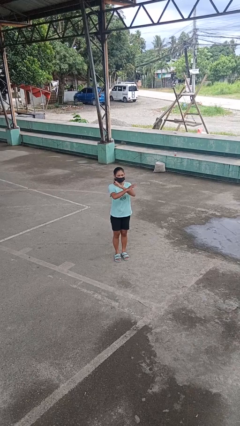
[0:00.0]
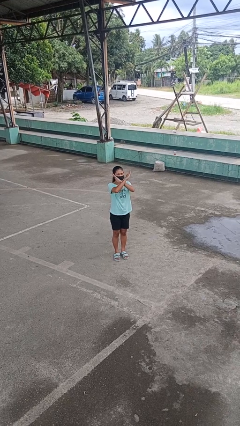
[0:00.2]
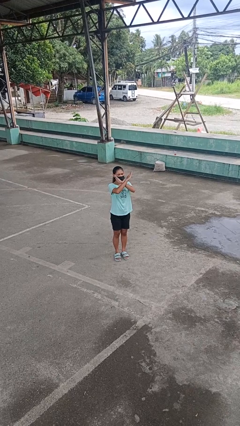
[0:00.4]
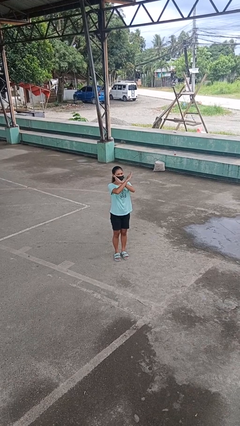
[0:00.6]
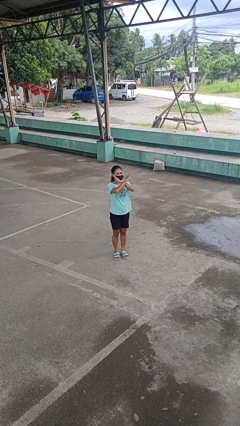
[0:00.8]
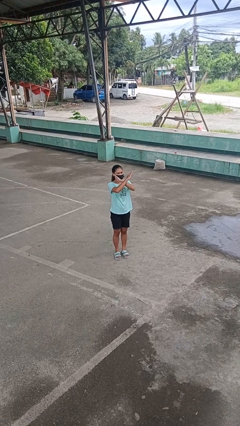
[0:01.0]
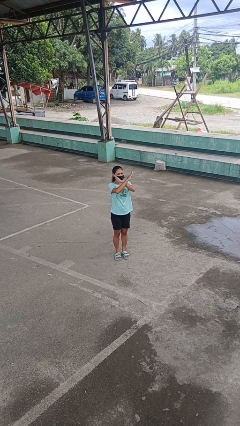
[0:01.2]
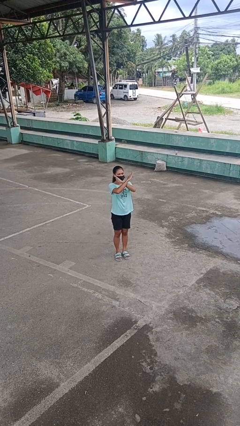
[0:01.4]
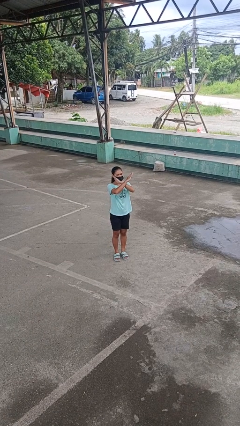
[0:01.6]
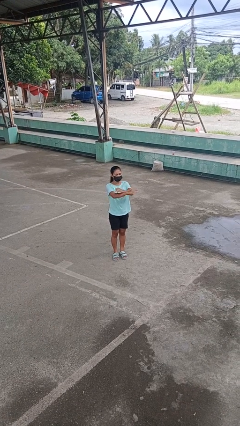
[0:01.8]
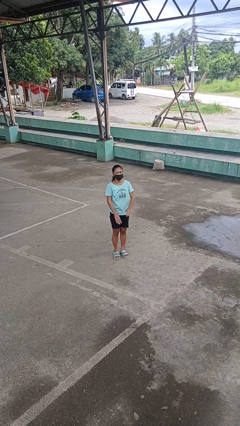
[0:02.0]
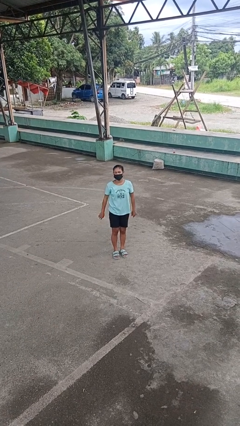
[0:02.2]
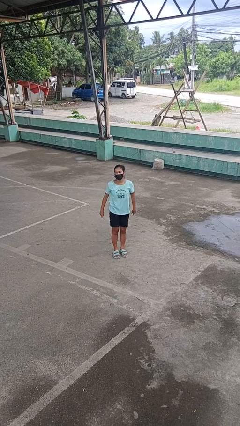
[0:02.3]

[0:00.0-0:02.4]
person gestures arms x

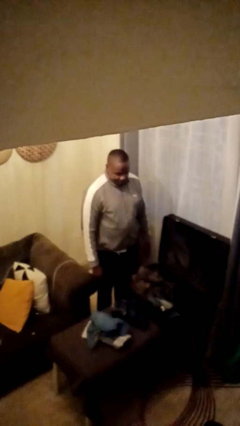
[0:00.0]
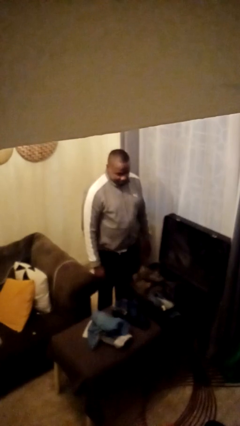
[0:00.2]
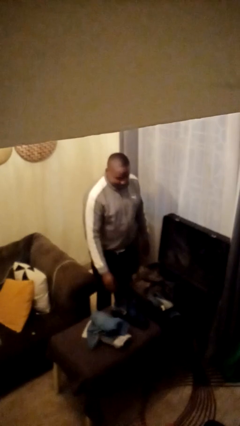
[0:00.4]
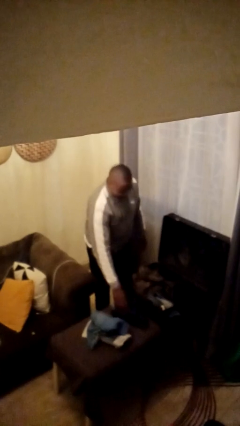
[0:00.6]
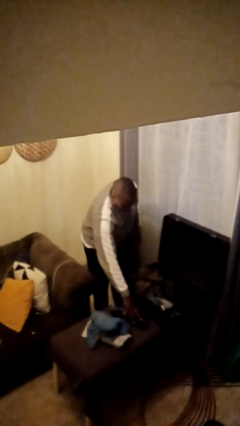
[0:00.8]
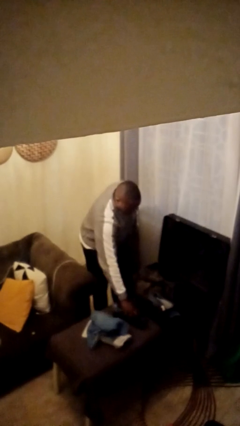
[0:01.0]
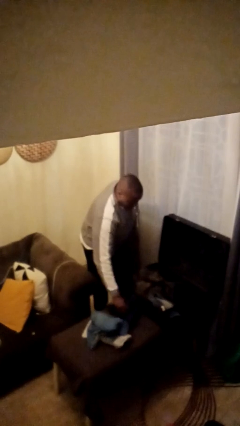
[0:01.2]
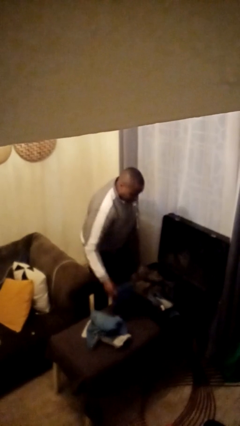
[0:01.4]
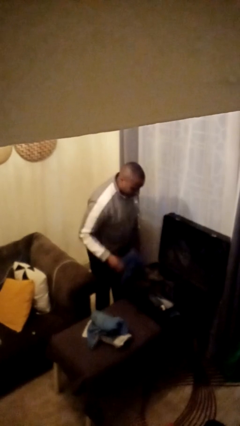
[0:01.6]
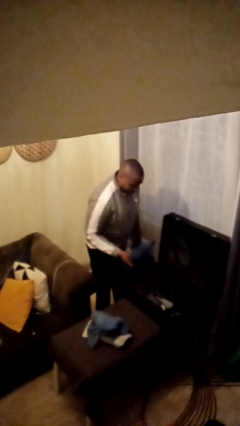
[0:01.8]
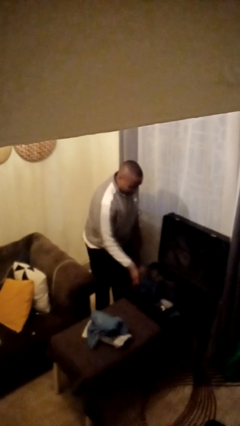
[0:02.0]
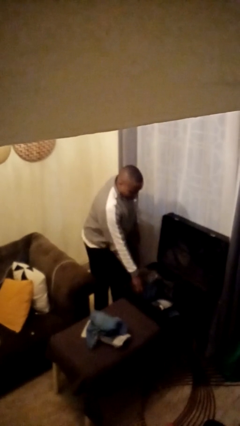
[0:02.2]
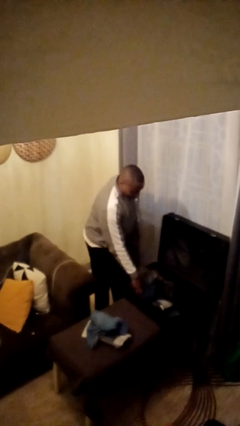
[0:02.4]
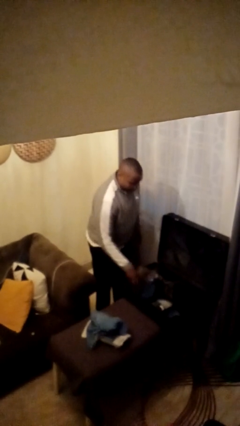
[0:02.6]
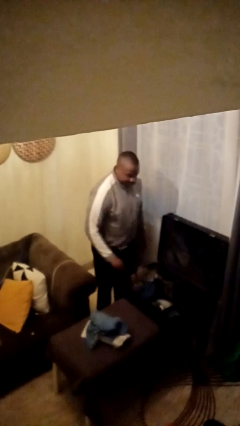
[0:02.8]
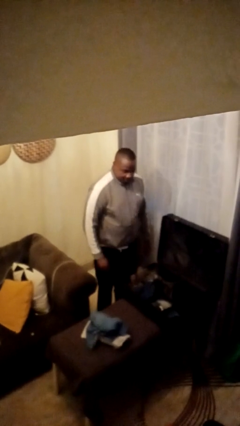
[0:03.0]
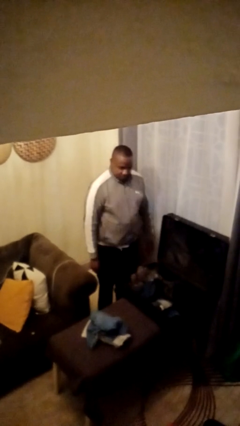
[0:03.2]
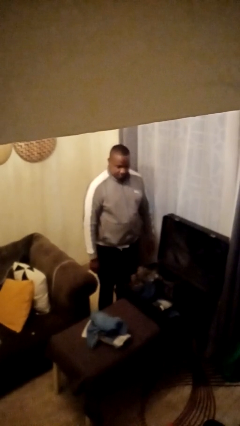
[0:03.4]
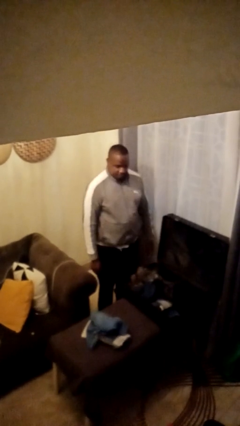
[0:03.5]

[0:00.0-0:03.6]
person loads clothes into suitcase

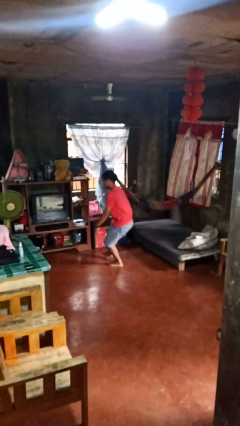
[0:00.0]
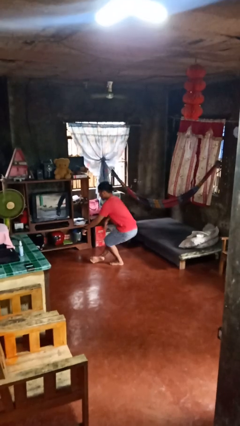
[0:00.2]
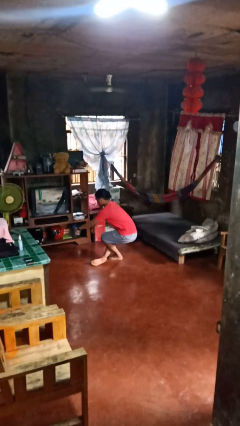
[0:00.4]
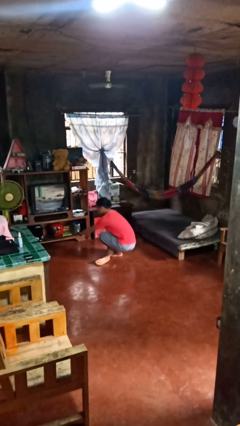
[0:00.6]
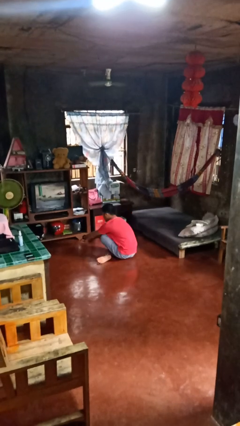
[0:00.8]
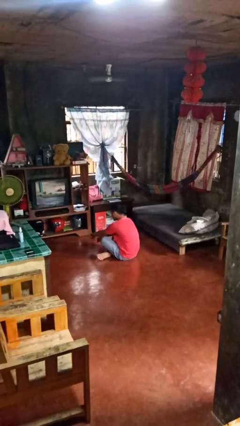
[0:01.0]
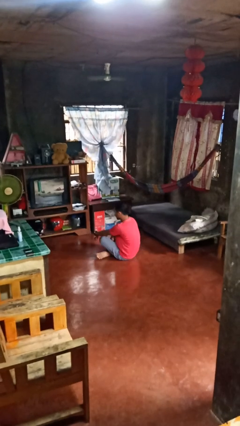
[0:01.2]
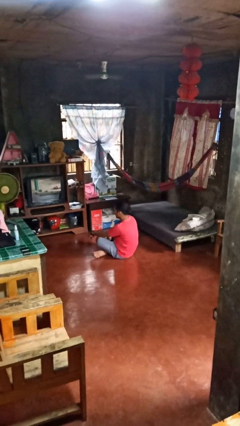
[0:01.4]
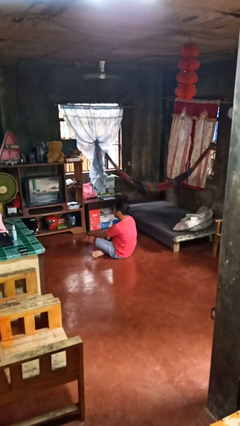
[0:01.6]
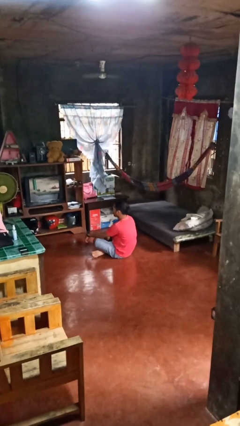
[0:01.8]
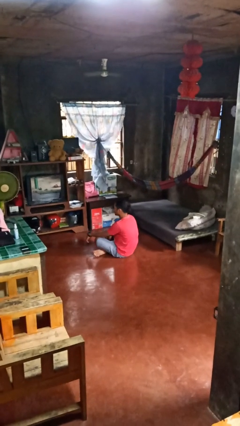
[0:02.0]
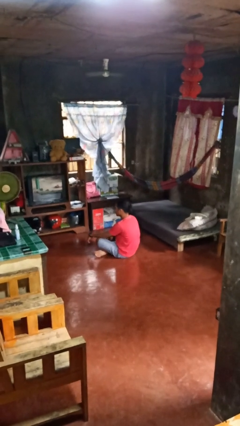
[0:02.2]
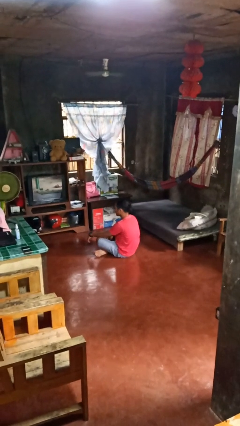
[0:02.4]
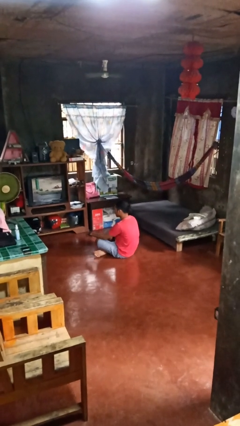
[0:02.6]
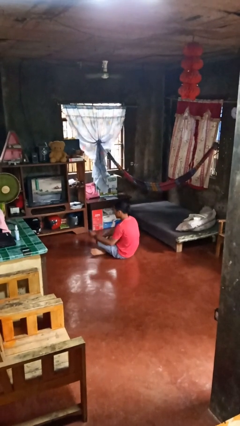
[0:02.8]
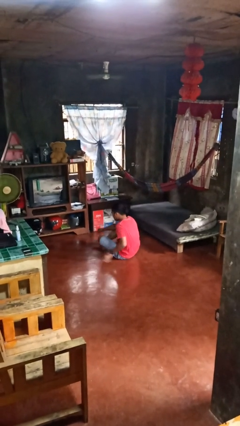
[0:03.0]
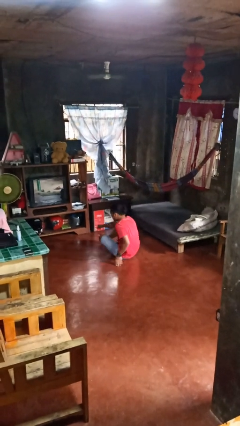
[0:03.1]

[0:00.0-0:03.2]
person sits crisscross

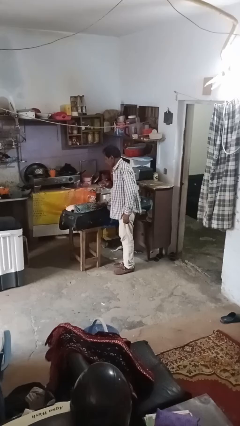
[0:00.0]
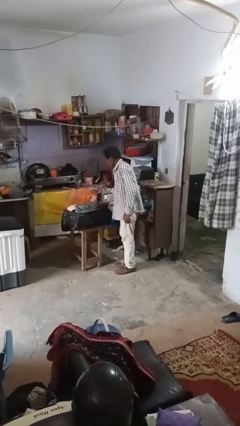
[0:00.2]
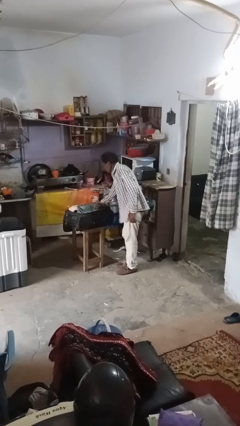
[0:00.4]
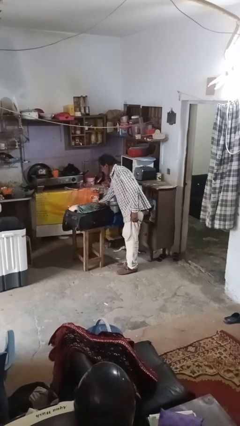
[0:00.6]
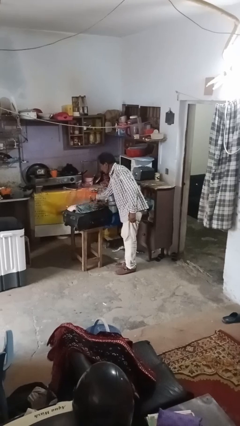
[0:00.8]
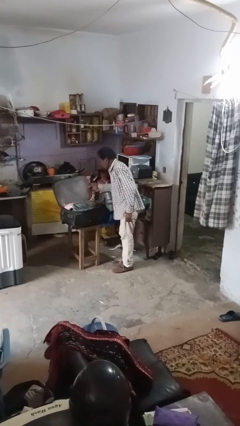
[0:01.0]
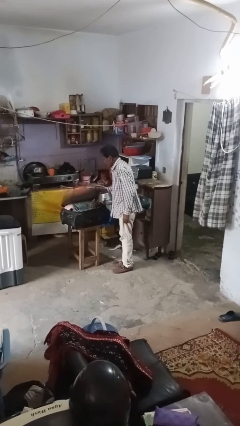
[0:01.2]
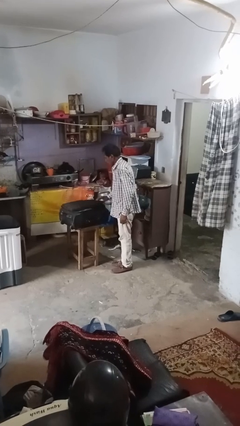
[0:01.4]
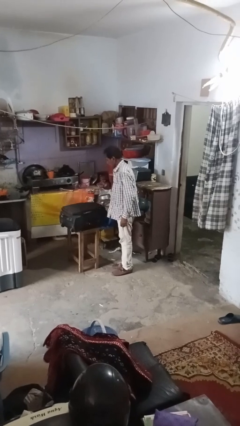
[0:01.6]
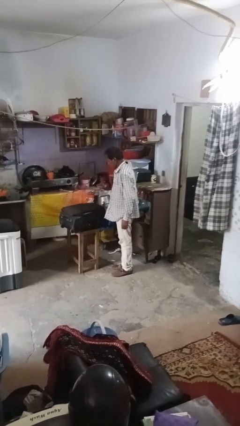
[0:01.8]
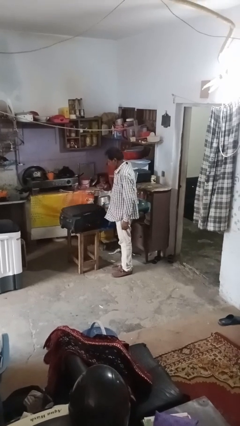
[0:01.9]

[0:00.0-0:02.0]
person closes suitcase

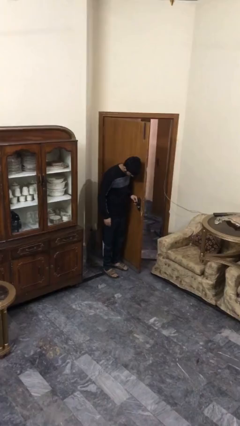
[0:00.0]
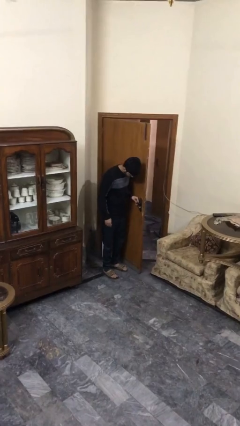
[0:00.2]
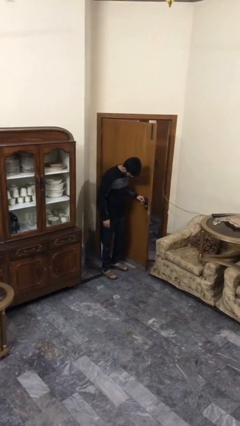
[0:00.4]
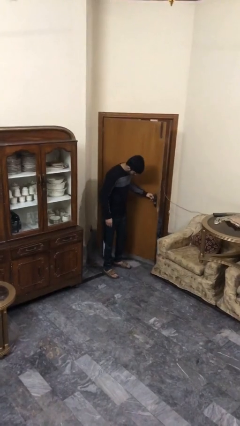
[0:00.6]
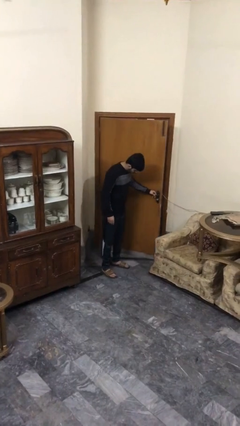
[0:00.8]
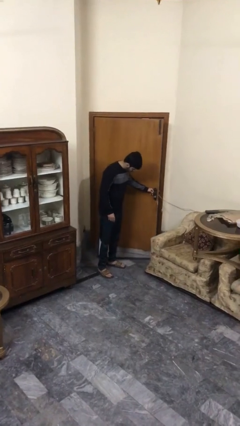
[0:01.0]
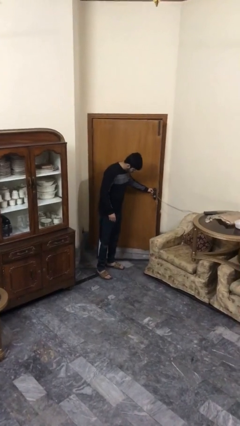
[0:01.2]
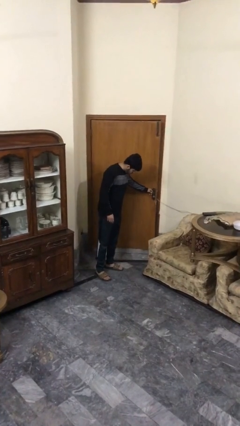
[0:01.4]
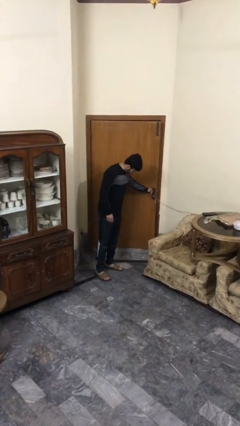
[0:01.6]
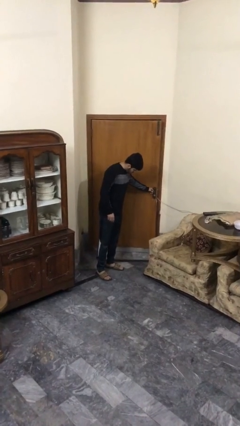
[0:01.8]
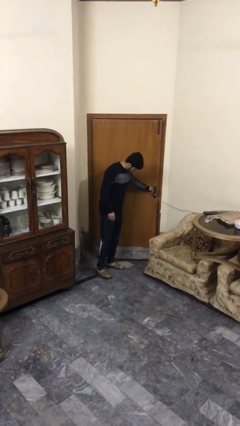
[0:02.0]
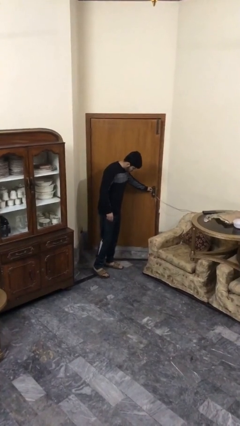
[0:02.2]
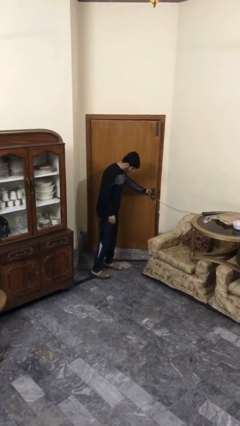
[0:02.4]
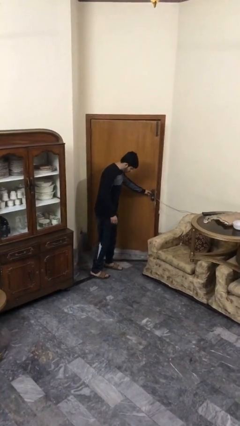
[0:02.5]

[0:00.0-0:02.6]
person closes facility door

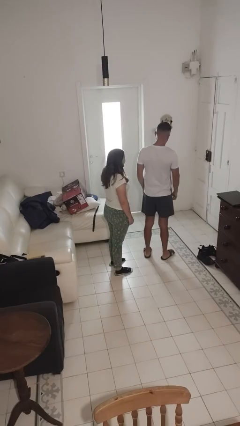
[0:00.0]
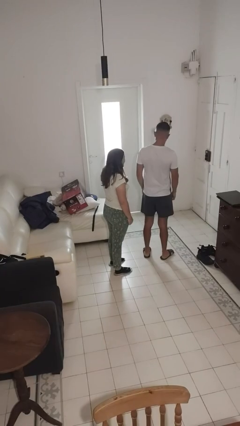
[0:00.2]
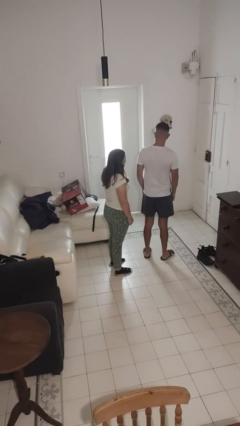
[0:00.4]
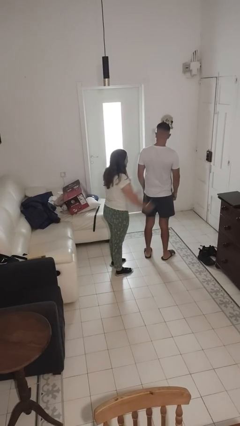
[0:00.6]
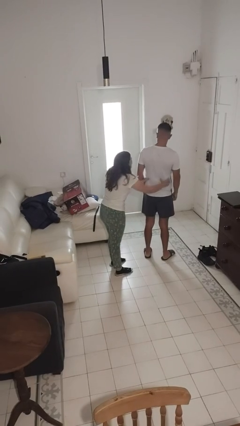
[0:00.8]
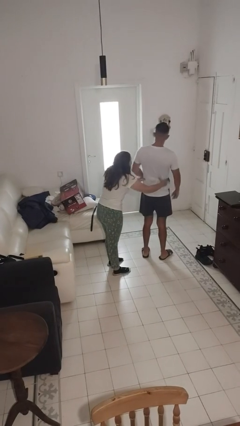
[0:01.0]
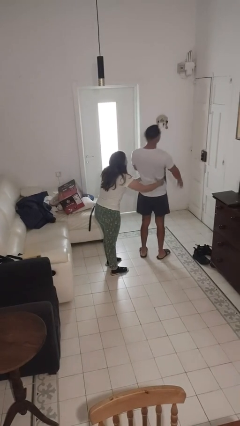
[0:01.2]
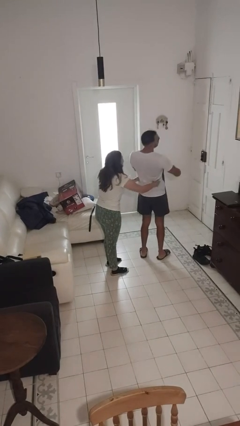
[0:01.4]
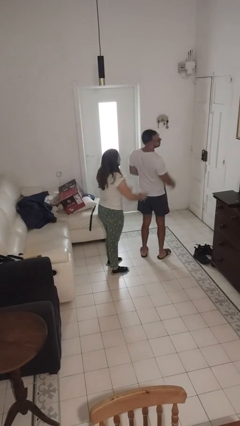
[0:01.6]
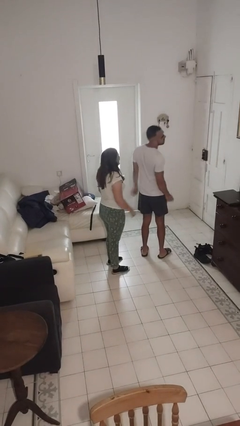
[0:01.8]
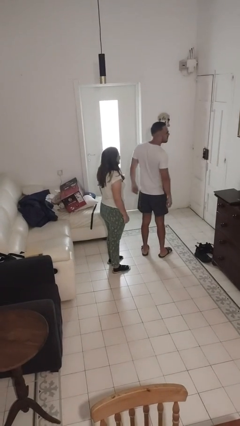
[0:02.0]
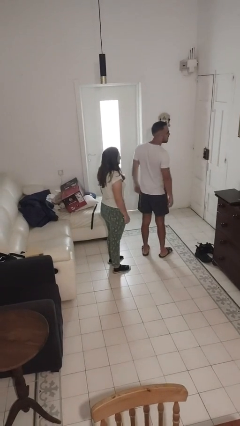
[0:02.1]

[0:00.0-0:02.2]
person tickles person

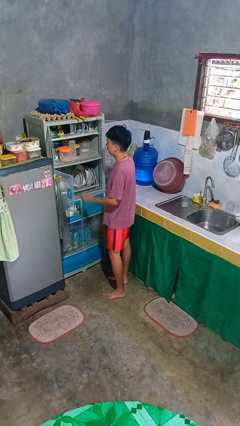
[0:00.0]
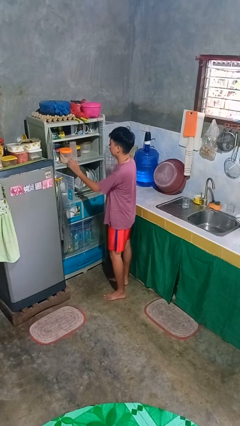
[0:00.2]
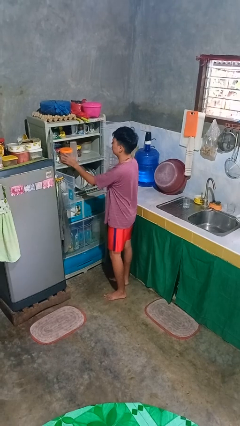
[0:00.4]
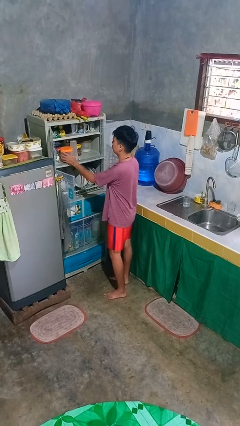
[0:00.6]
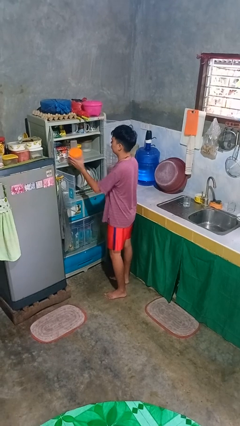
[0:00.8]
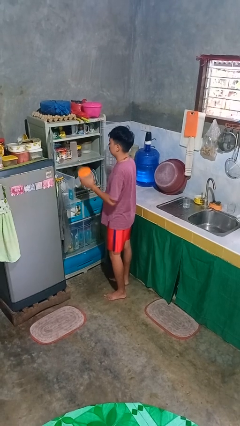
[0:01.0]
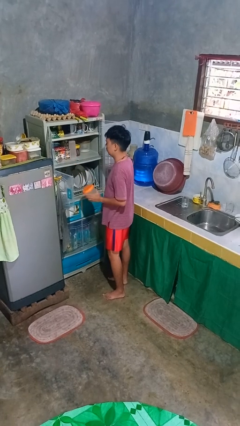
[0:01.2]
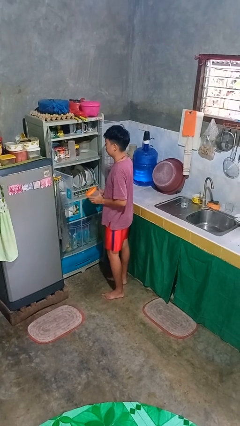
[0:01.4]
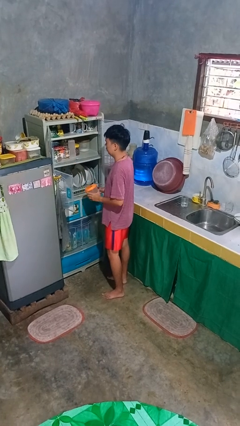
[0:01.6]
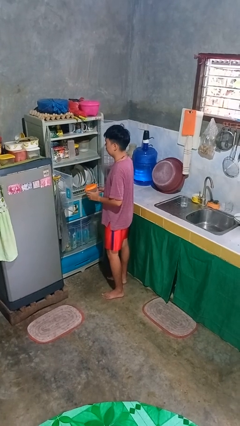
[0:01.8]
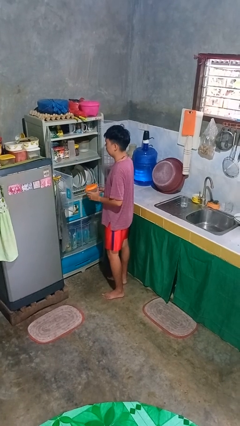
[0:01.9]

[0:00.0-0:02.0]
person takes object from cabinet
